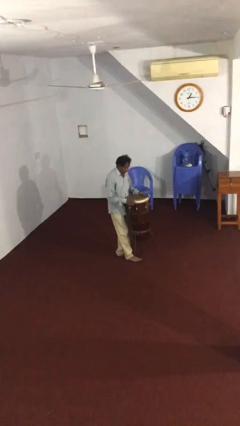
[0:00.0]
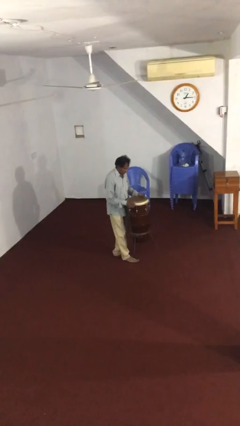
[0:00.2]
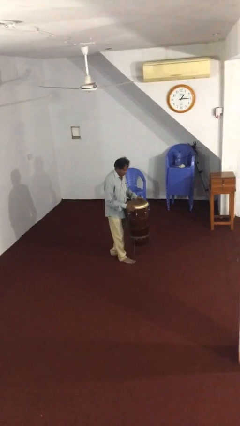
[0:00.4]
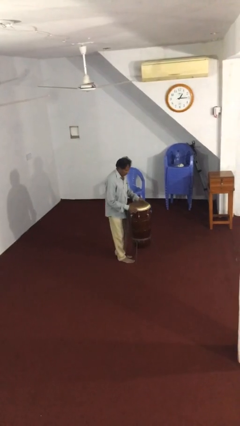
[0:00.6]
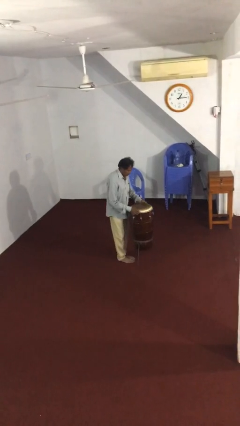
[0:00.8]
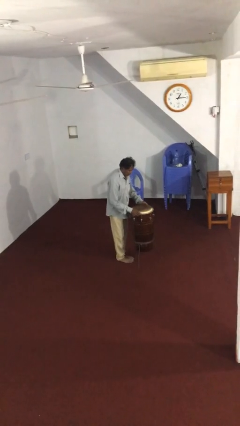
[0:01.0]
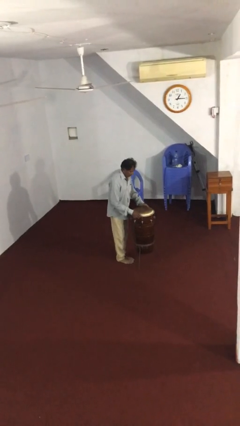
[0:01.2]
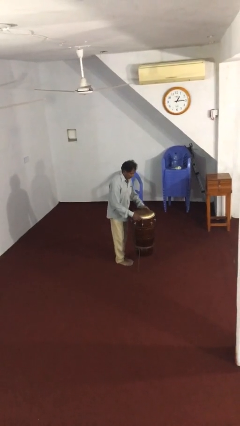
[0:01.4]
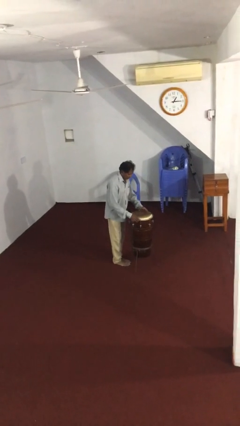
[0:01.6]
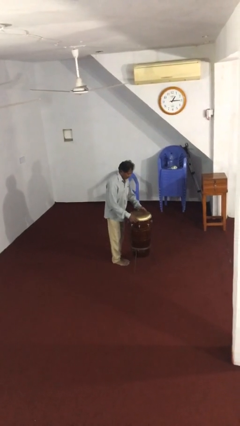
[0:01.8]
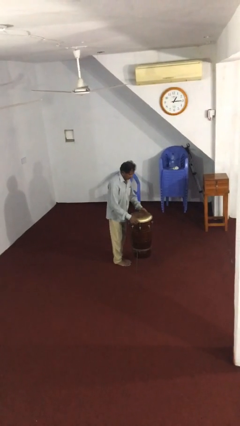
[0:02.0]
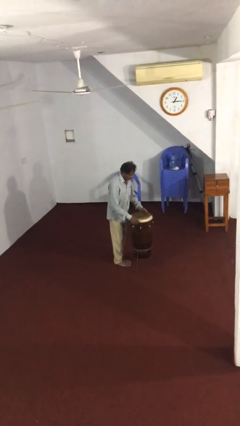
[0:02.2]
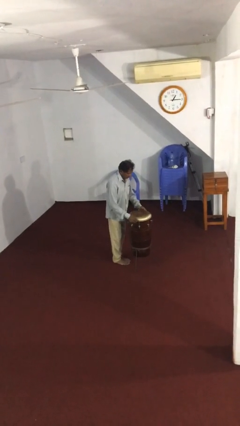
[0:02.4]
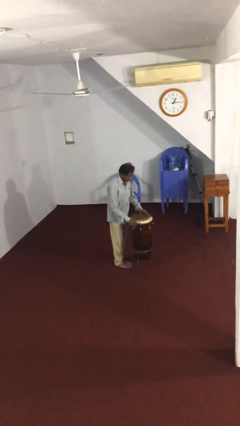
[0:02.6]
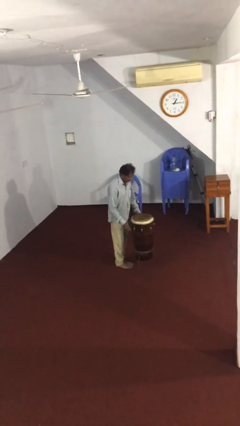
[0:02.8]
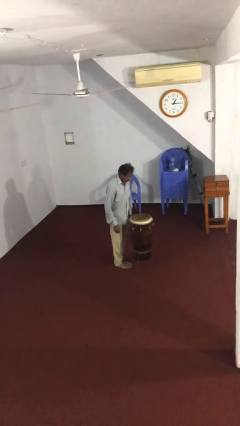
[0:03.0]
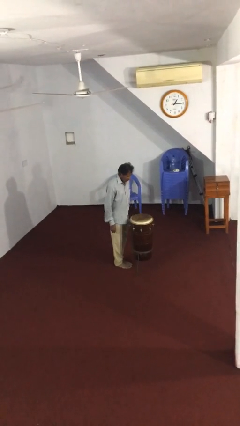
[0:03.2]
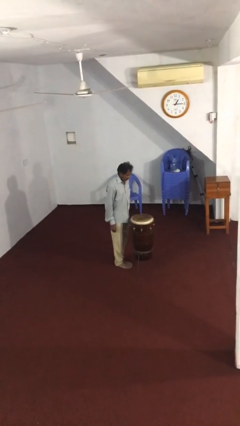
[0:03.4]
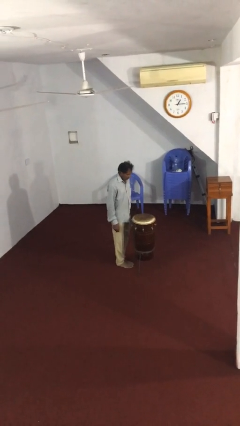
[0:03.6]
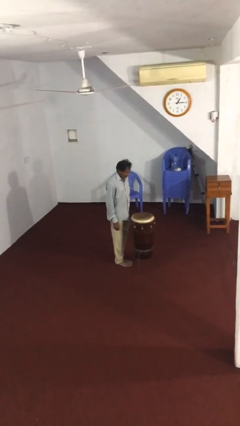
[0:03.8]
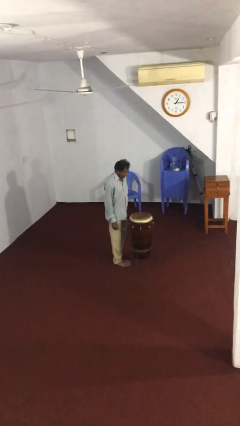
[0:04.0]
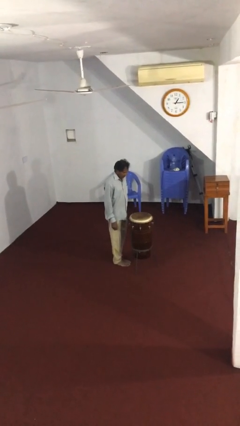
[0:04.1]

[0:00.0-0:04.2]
person puts down object on floor

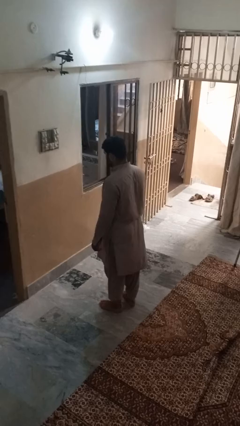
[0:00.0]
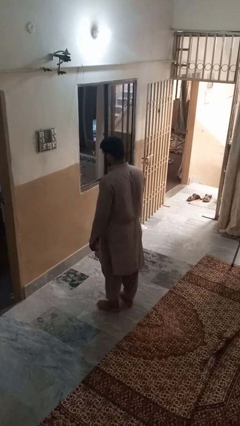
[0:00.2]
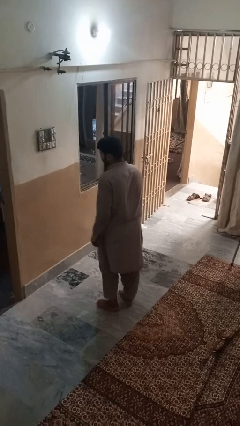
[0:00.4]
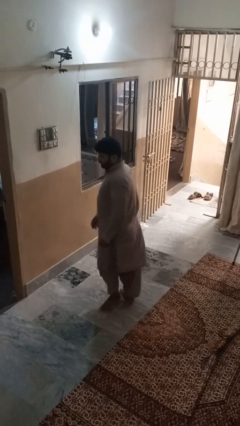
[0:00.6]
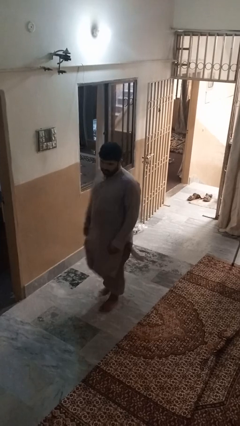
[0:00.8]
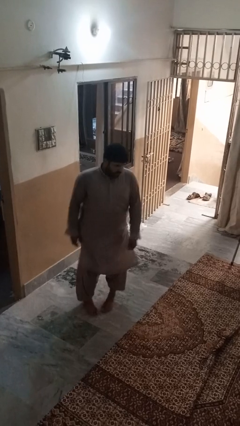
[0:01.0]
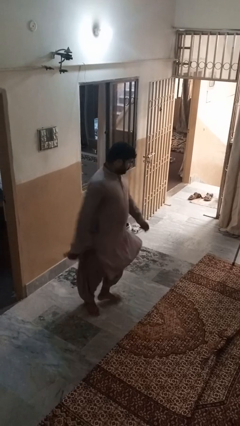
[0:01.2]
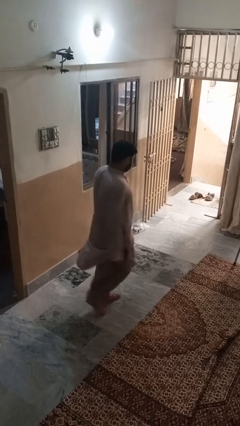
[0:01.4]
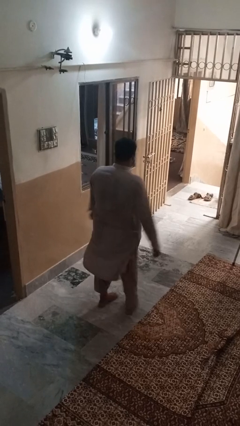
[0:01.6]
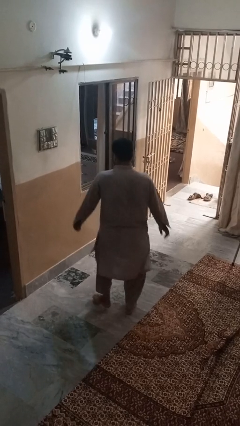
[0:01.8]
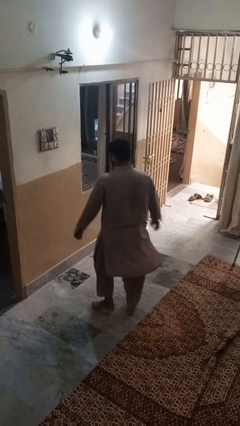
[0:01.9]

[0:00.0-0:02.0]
person twirls

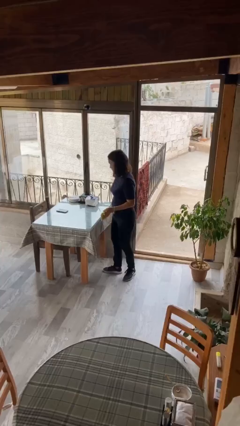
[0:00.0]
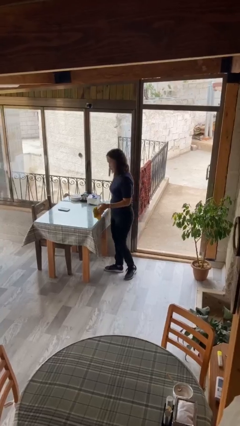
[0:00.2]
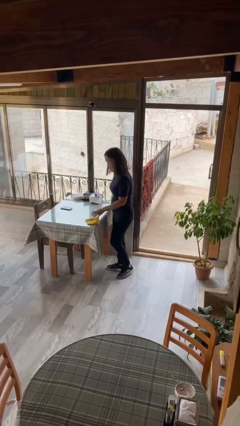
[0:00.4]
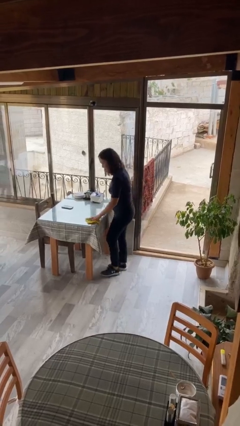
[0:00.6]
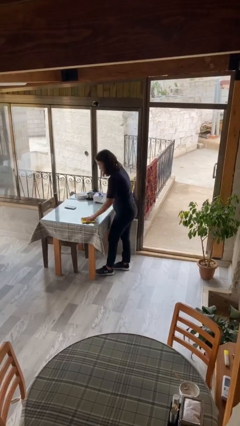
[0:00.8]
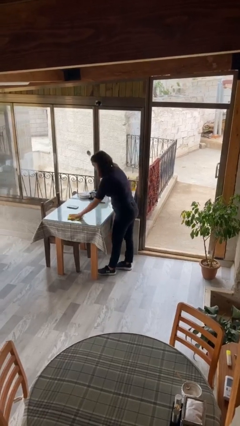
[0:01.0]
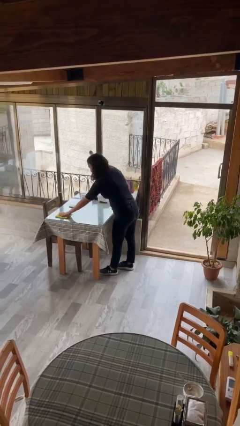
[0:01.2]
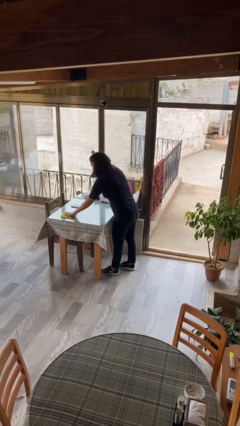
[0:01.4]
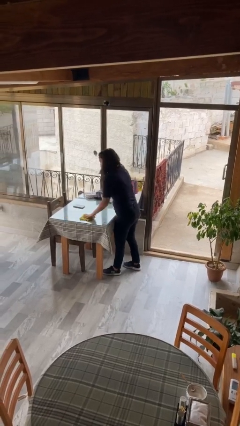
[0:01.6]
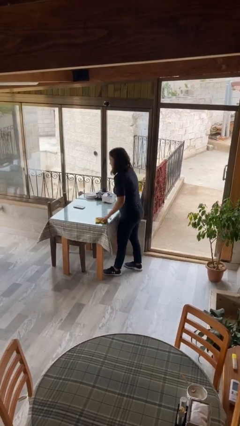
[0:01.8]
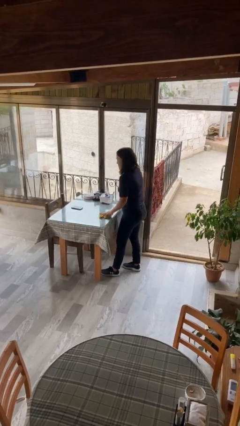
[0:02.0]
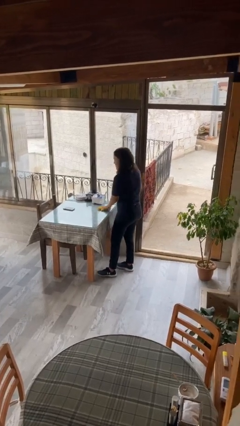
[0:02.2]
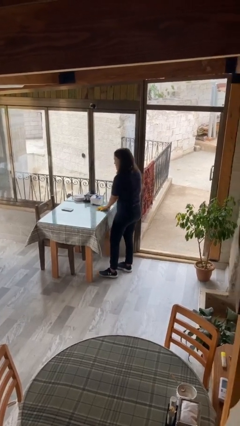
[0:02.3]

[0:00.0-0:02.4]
person cleans table with rag

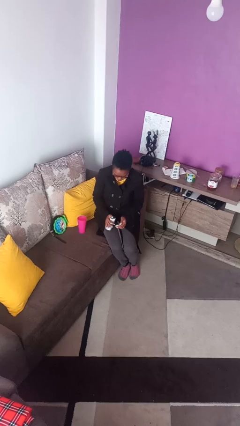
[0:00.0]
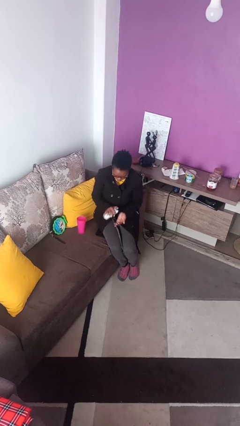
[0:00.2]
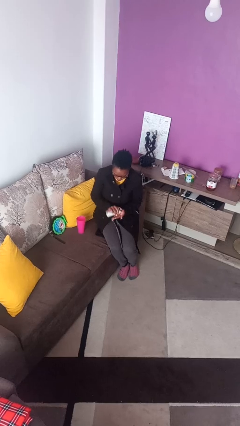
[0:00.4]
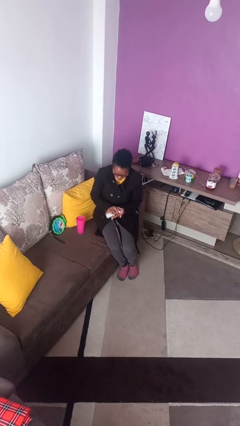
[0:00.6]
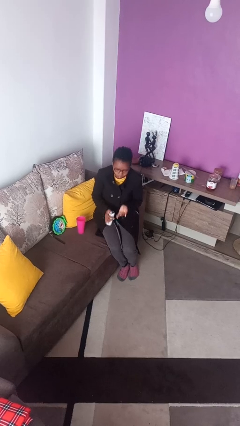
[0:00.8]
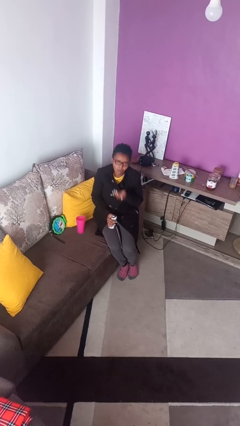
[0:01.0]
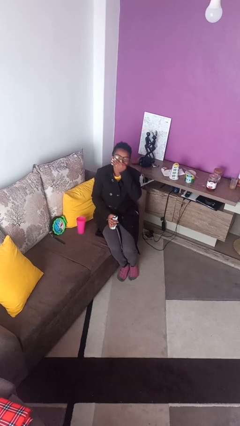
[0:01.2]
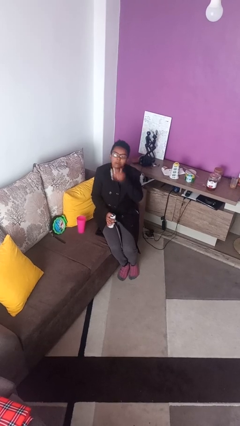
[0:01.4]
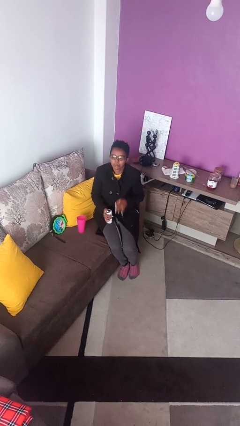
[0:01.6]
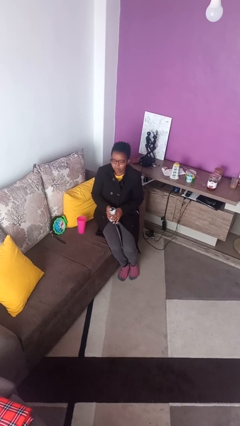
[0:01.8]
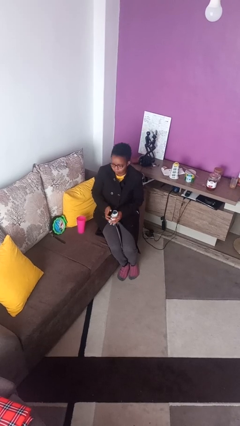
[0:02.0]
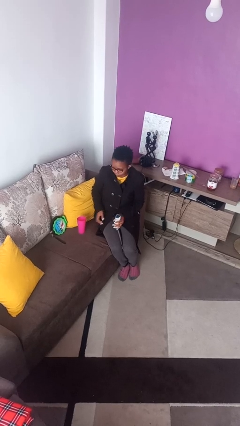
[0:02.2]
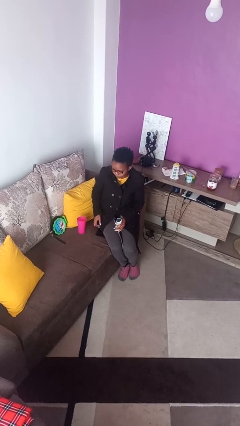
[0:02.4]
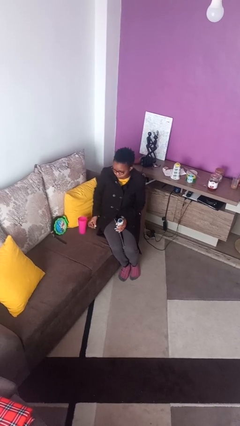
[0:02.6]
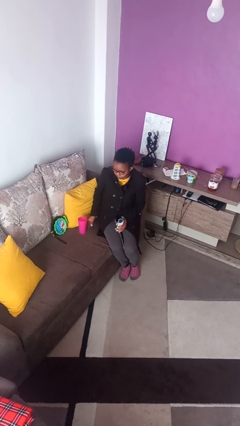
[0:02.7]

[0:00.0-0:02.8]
person takes medicine pills

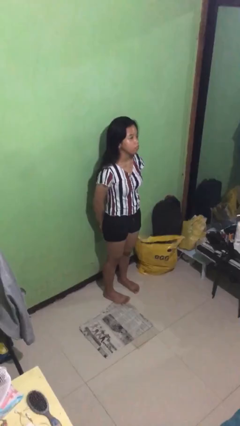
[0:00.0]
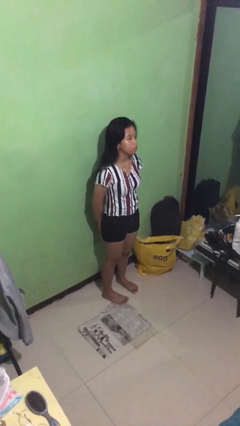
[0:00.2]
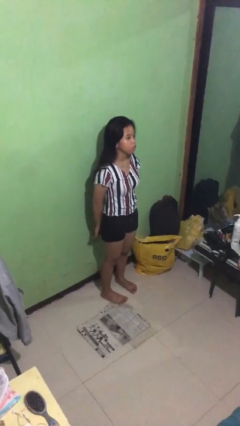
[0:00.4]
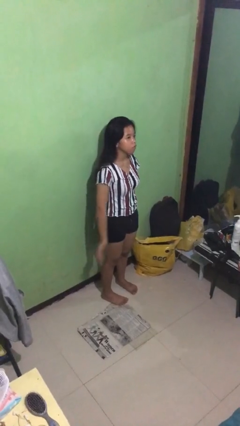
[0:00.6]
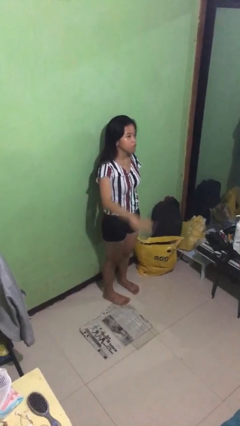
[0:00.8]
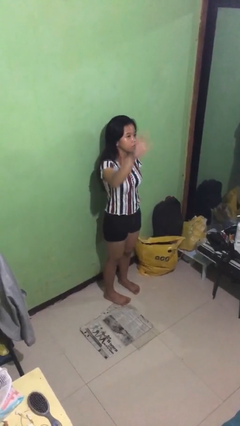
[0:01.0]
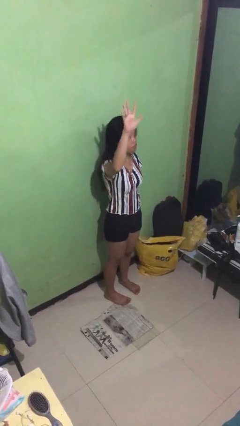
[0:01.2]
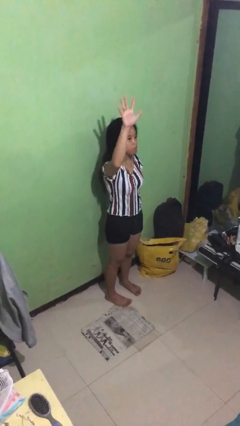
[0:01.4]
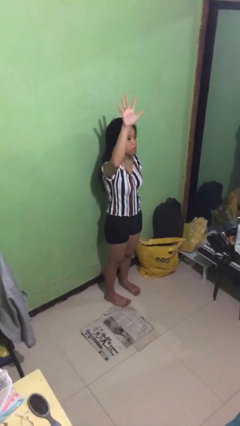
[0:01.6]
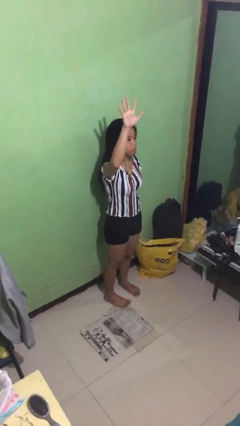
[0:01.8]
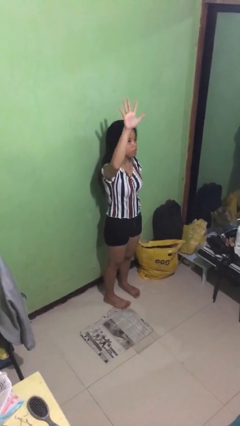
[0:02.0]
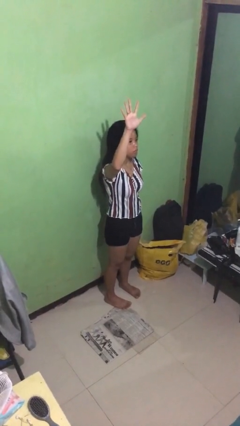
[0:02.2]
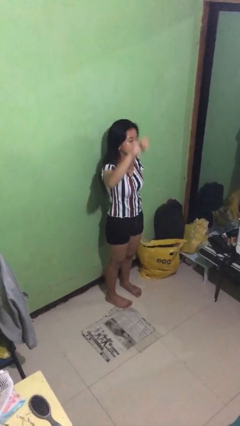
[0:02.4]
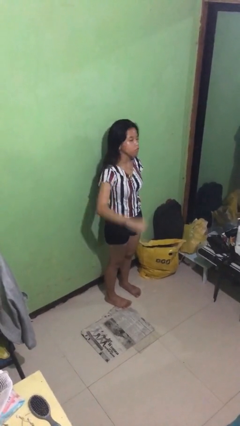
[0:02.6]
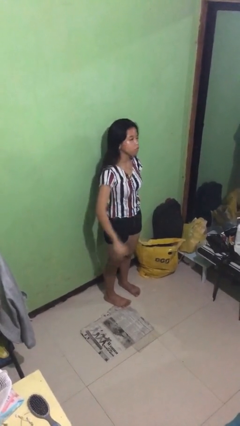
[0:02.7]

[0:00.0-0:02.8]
person gestures number five

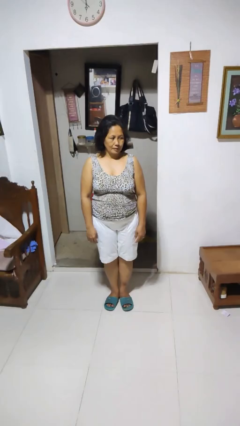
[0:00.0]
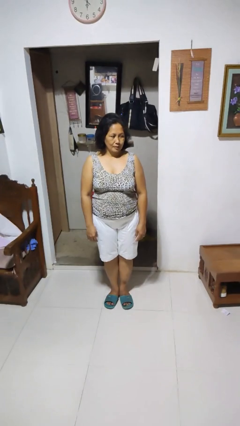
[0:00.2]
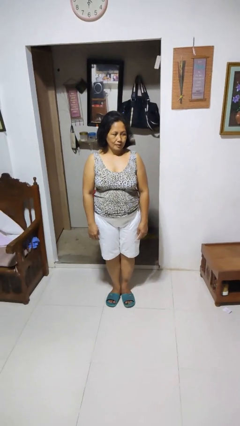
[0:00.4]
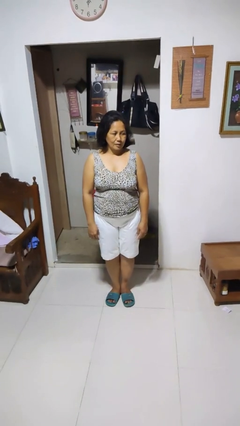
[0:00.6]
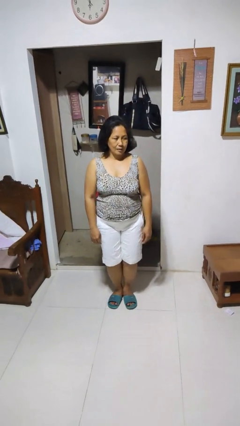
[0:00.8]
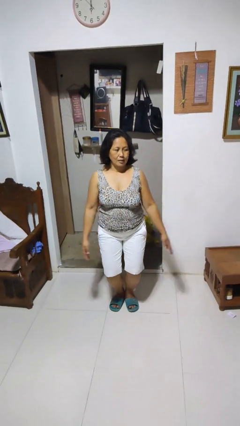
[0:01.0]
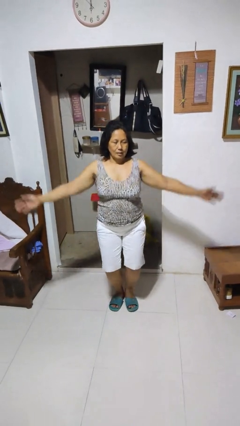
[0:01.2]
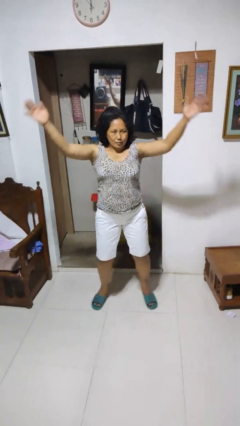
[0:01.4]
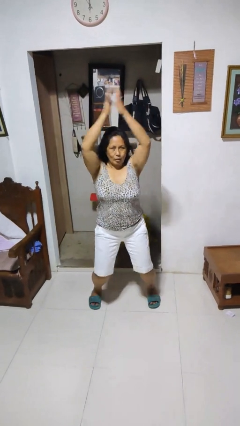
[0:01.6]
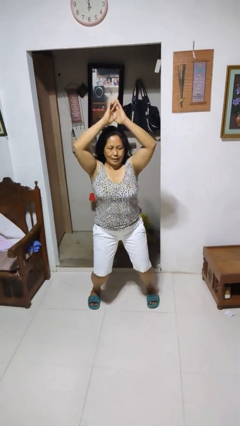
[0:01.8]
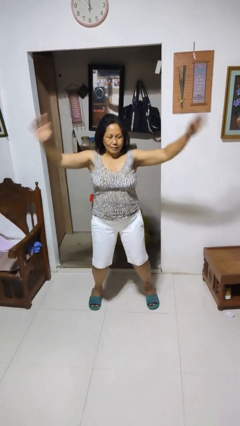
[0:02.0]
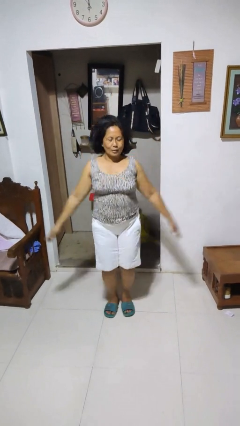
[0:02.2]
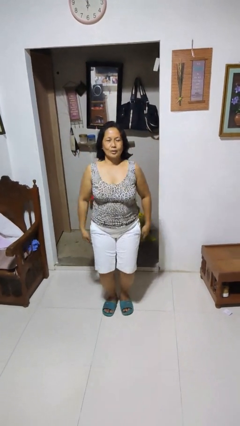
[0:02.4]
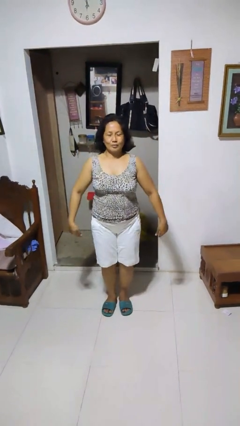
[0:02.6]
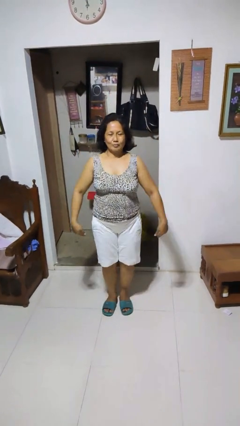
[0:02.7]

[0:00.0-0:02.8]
person exercises with jumping jacks

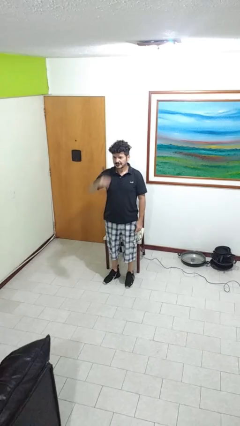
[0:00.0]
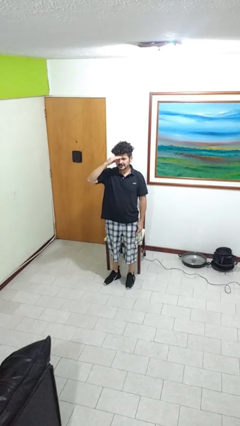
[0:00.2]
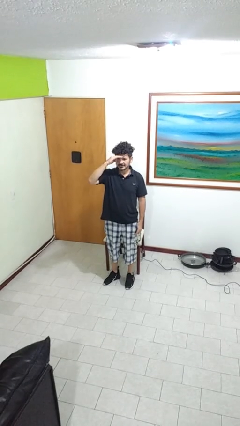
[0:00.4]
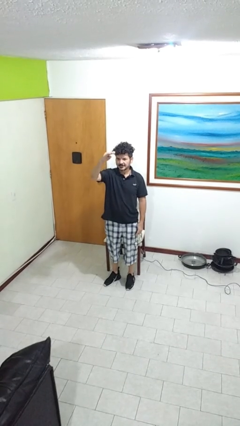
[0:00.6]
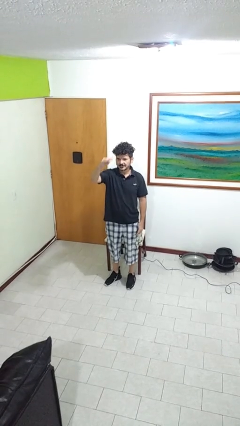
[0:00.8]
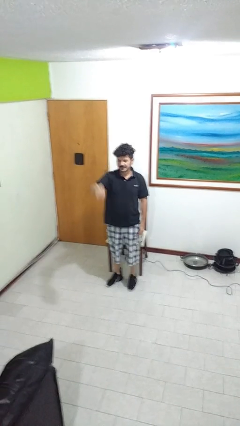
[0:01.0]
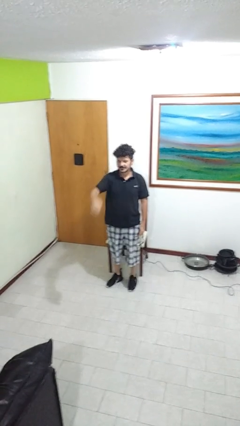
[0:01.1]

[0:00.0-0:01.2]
person salutes
